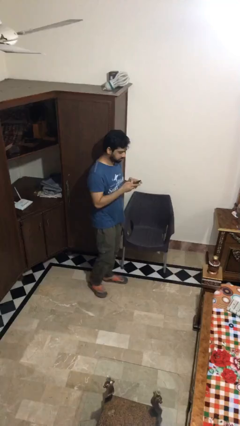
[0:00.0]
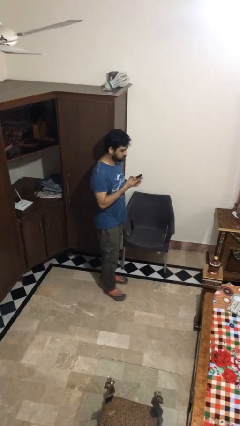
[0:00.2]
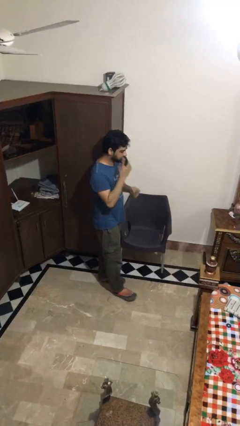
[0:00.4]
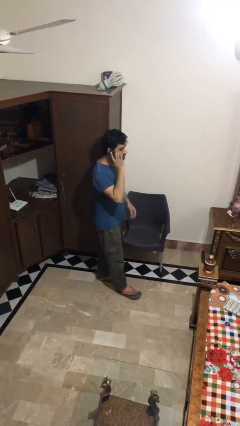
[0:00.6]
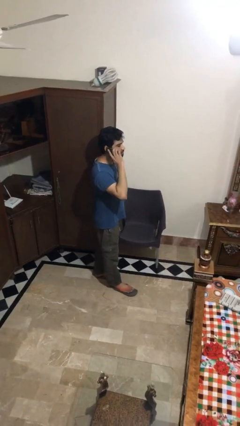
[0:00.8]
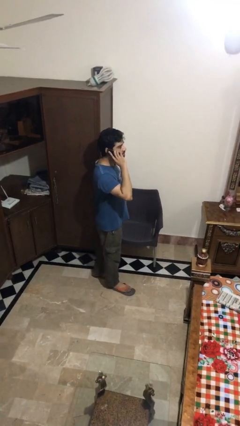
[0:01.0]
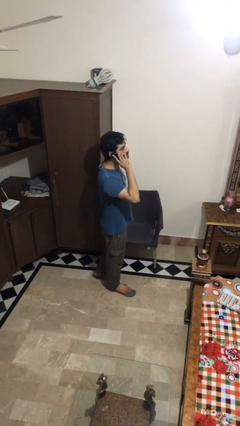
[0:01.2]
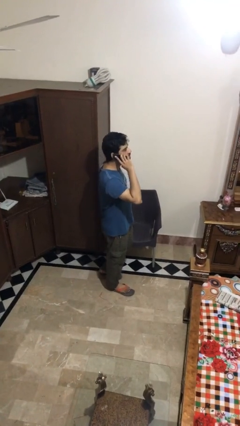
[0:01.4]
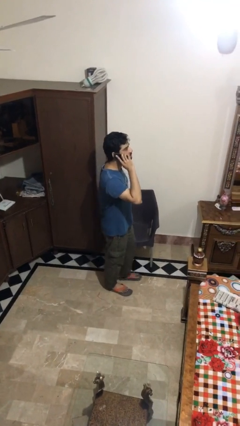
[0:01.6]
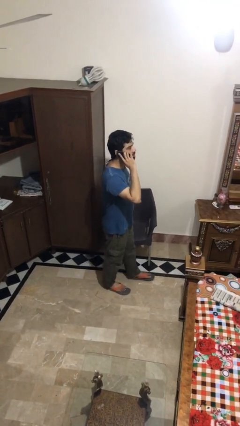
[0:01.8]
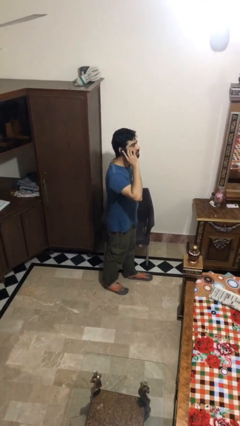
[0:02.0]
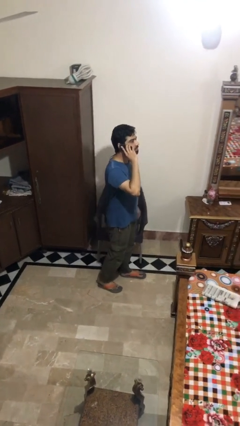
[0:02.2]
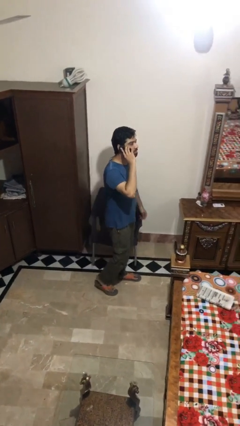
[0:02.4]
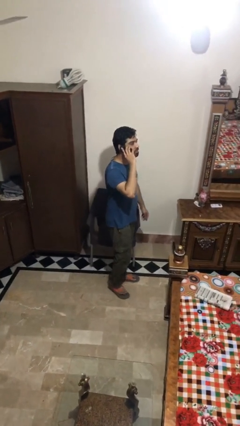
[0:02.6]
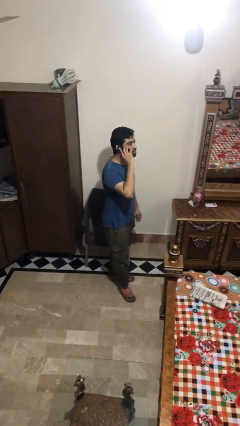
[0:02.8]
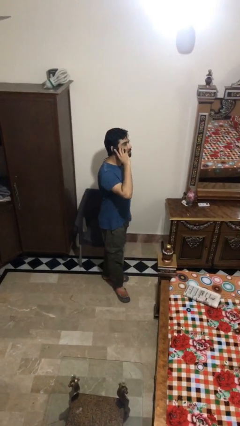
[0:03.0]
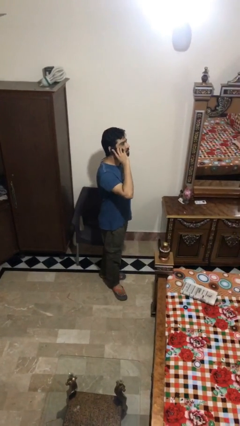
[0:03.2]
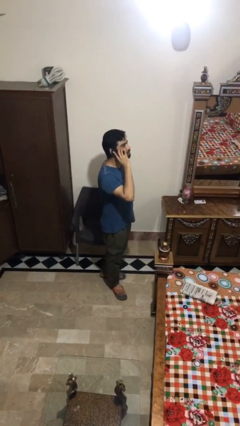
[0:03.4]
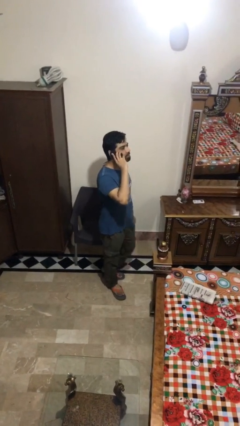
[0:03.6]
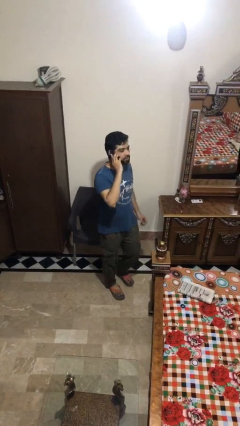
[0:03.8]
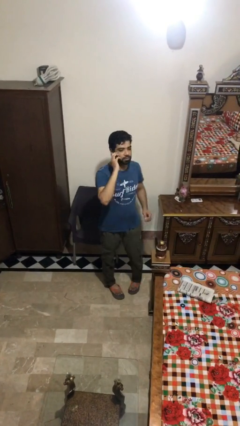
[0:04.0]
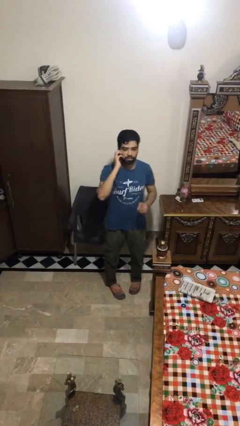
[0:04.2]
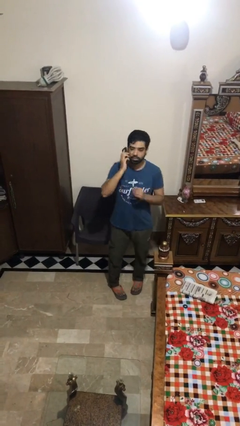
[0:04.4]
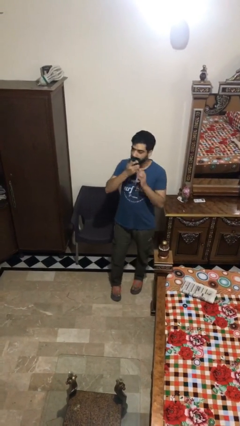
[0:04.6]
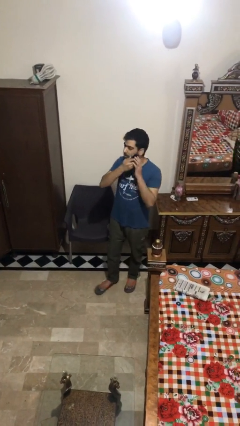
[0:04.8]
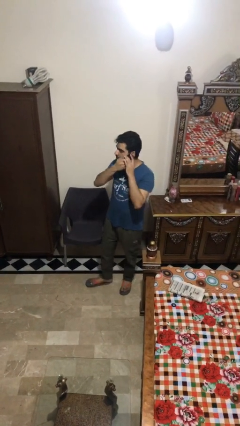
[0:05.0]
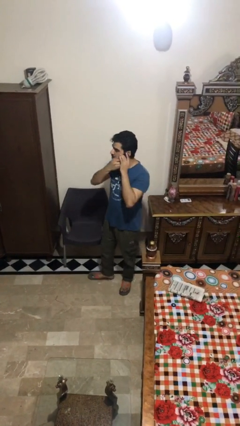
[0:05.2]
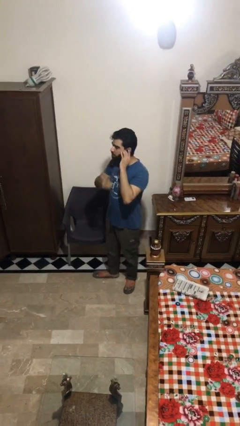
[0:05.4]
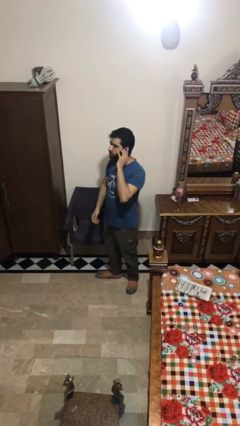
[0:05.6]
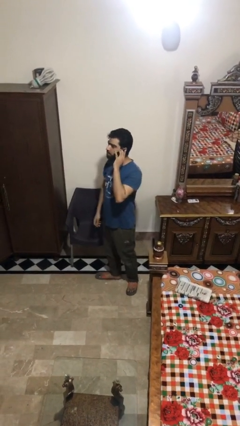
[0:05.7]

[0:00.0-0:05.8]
person talks on phone

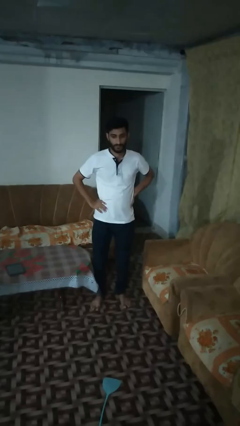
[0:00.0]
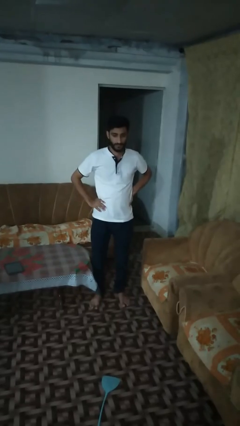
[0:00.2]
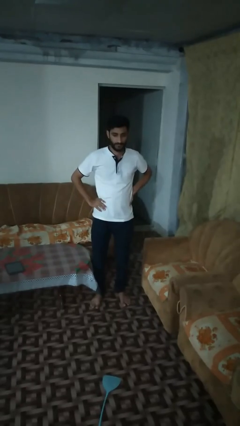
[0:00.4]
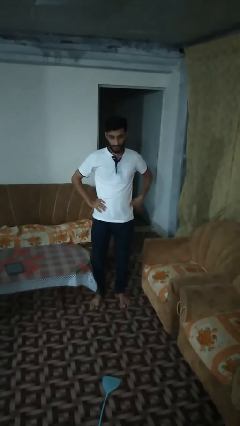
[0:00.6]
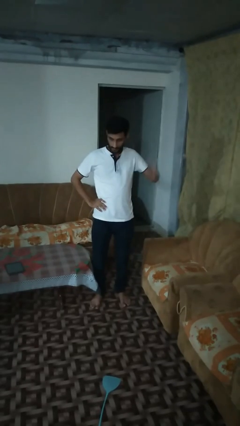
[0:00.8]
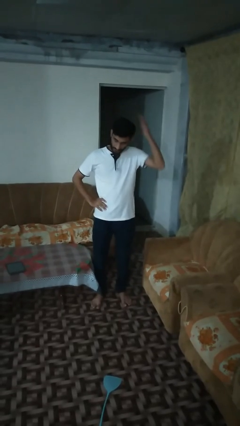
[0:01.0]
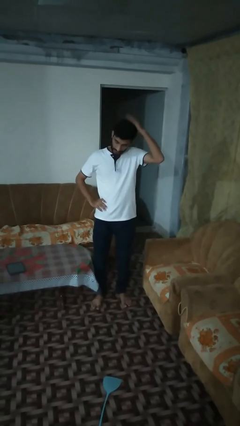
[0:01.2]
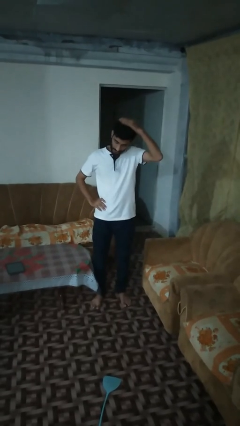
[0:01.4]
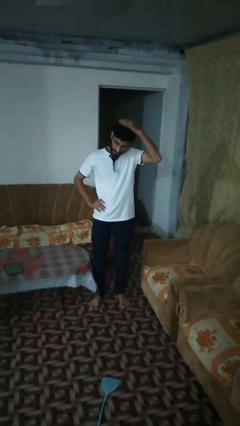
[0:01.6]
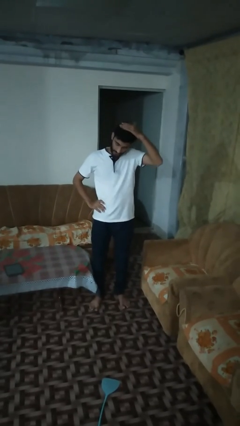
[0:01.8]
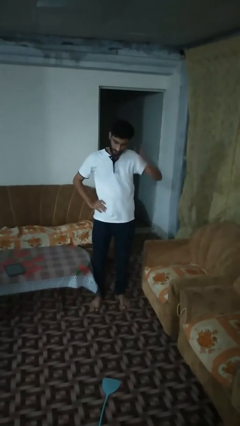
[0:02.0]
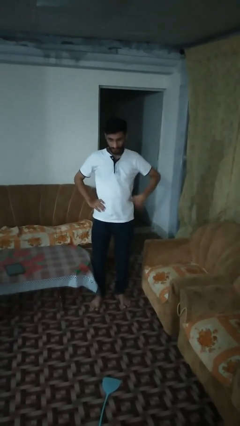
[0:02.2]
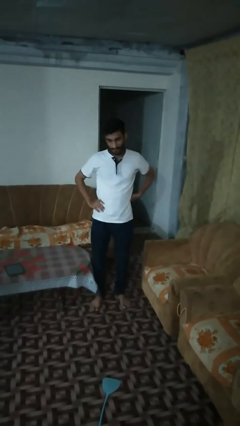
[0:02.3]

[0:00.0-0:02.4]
person pats head

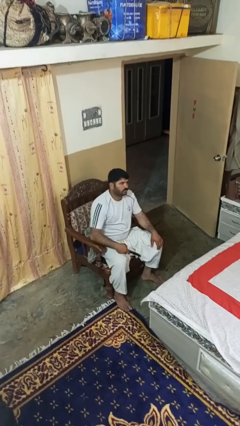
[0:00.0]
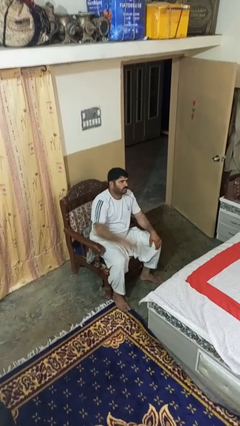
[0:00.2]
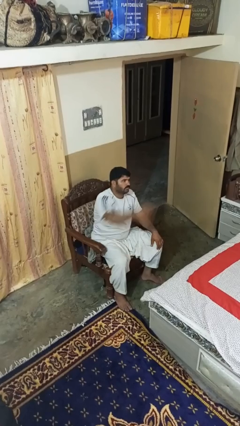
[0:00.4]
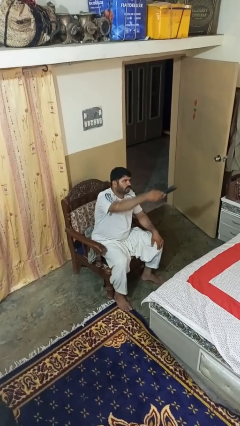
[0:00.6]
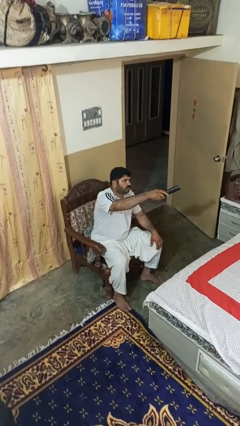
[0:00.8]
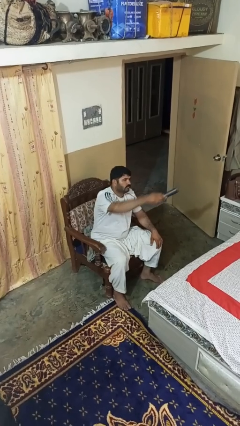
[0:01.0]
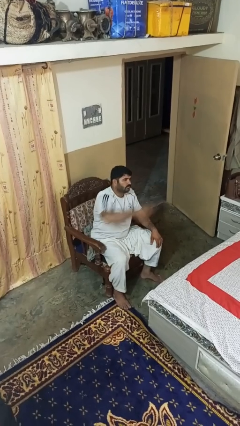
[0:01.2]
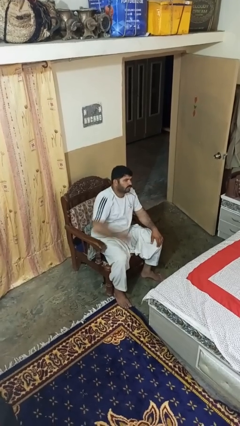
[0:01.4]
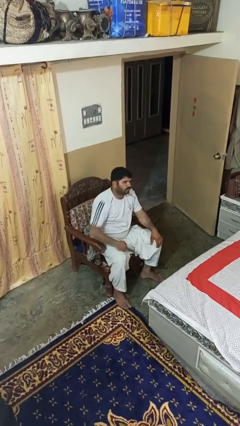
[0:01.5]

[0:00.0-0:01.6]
person uses television remote

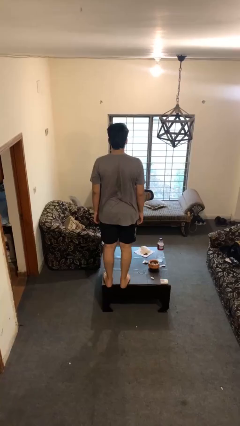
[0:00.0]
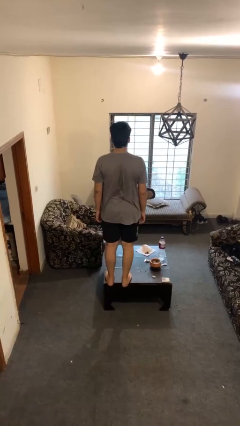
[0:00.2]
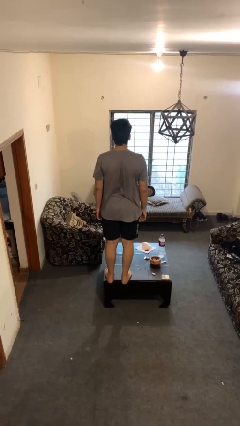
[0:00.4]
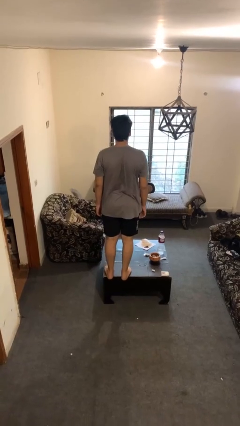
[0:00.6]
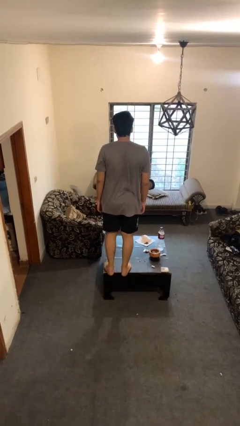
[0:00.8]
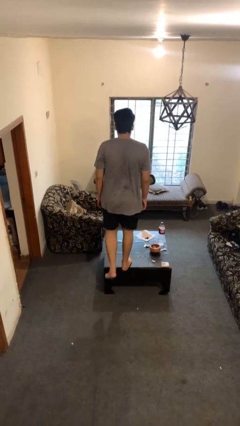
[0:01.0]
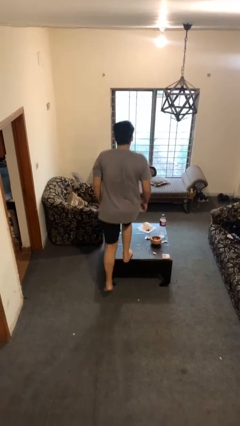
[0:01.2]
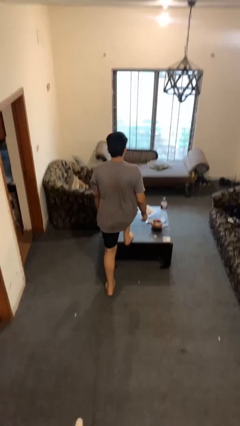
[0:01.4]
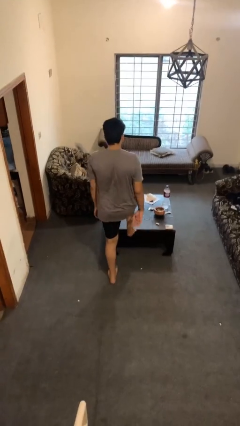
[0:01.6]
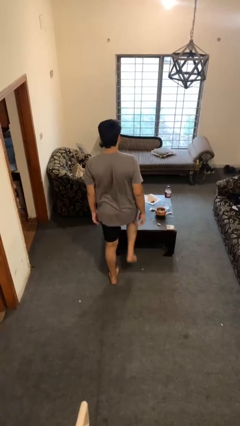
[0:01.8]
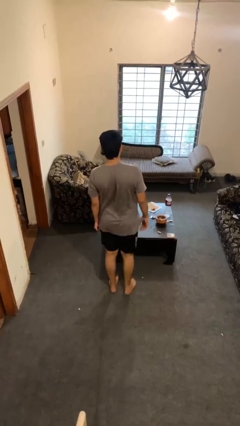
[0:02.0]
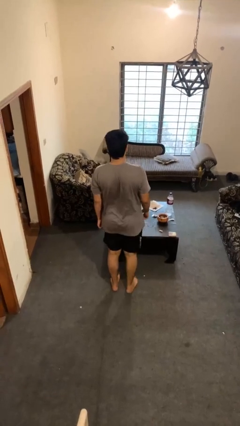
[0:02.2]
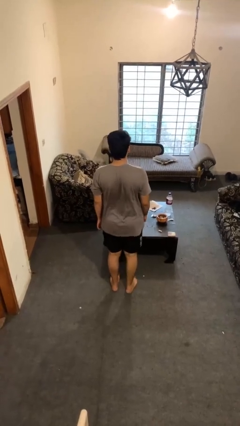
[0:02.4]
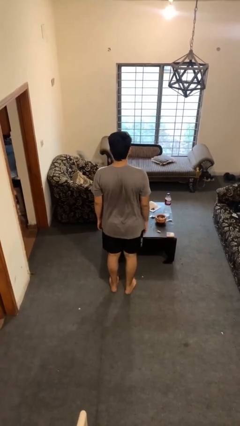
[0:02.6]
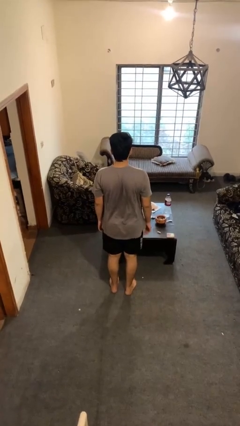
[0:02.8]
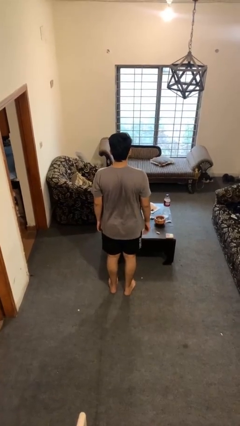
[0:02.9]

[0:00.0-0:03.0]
person climbs off table

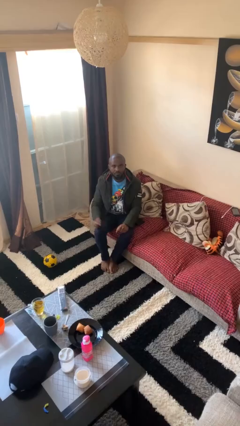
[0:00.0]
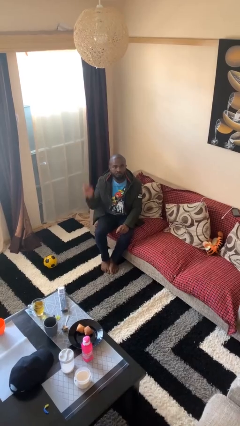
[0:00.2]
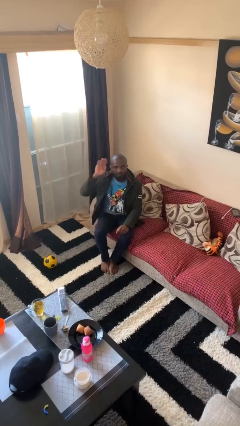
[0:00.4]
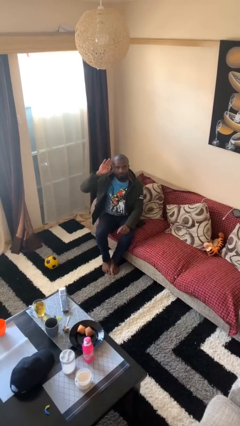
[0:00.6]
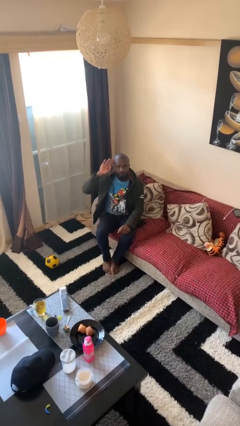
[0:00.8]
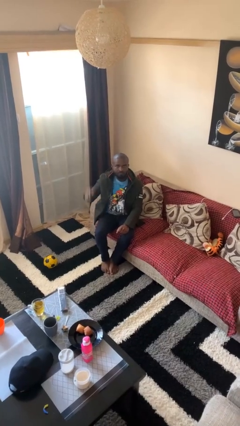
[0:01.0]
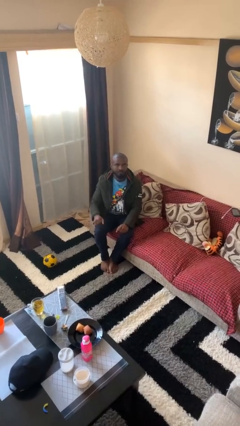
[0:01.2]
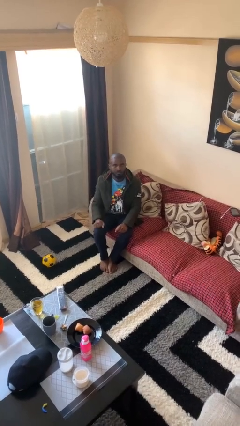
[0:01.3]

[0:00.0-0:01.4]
person salutes

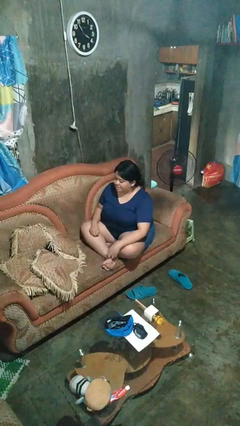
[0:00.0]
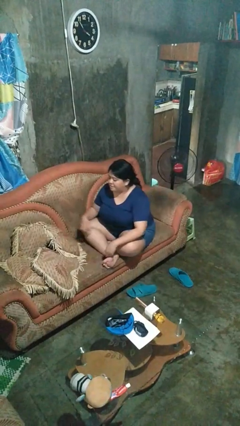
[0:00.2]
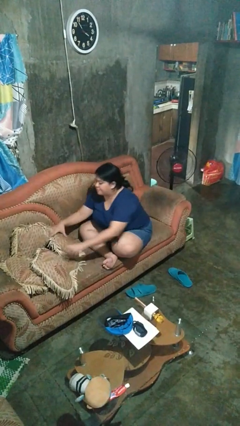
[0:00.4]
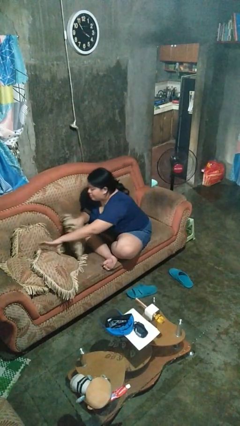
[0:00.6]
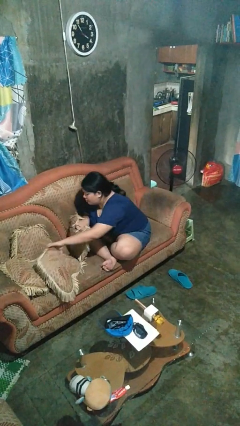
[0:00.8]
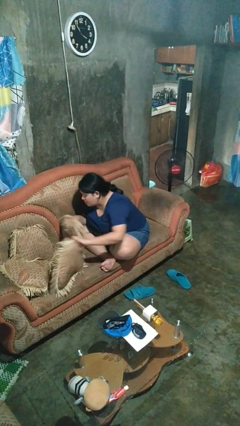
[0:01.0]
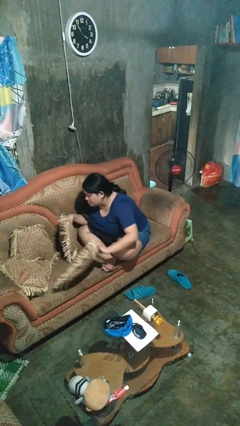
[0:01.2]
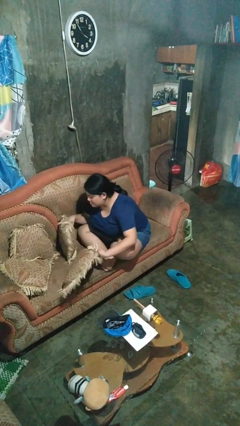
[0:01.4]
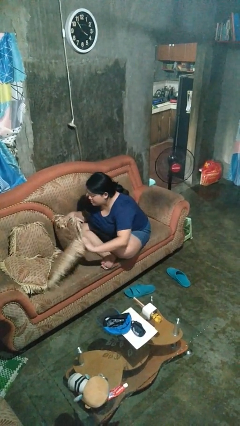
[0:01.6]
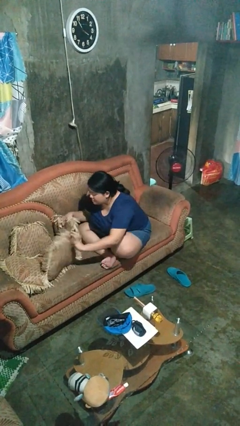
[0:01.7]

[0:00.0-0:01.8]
person searches in couch

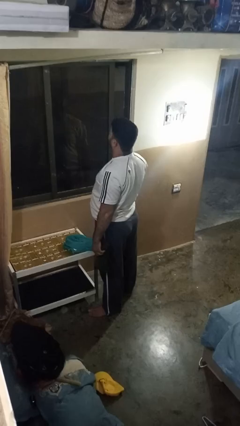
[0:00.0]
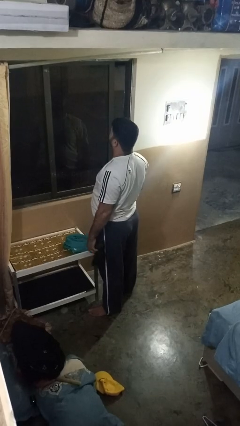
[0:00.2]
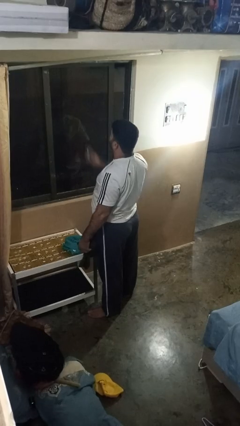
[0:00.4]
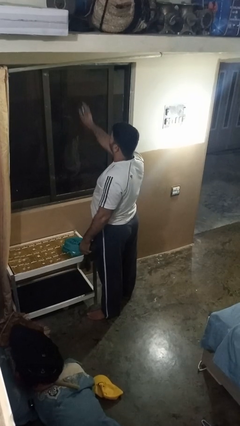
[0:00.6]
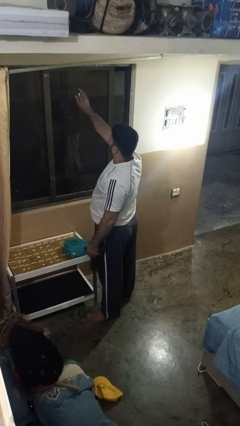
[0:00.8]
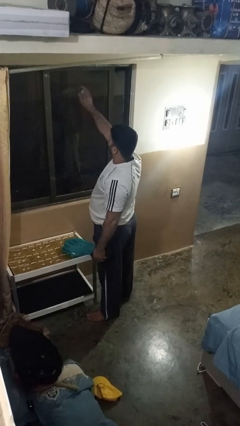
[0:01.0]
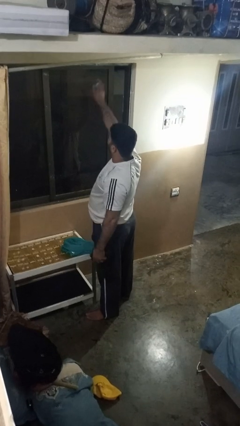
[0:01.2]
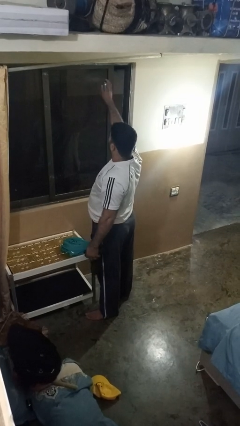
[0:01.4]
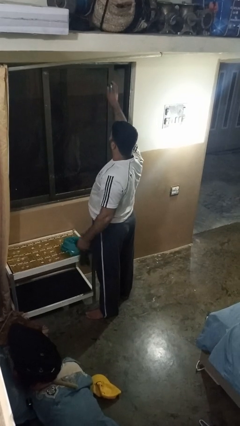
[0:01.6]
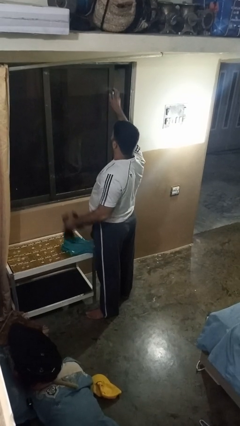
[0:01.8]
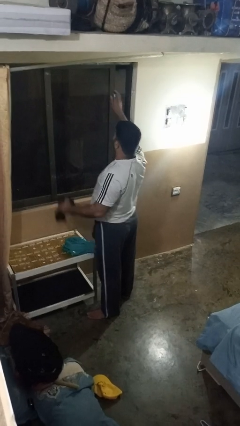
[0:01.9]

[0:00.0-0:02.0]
person sprays from bottle
